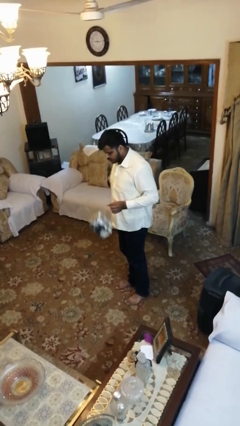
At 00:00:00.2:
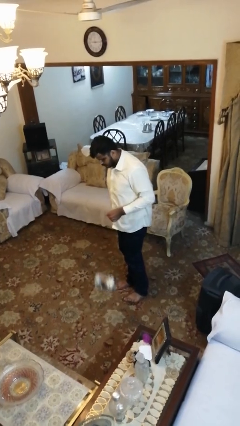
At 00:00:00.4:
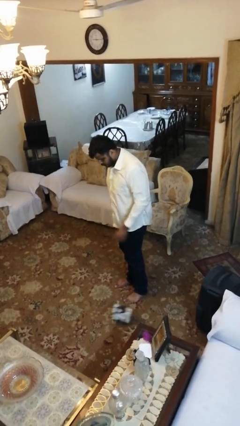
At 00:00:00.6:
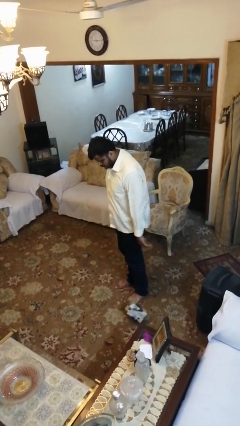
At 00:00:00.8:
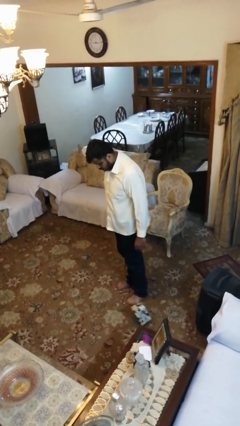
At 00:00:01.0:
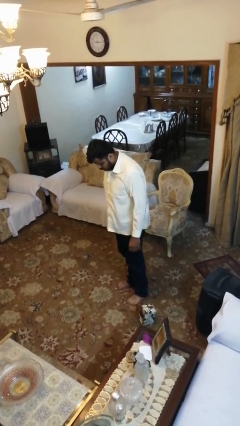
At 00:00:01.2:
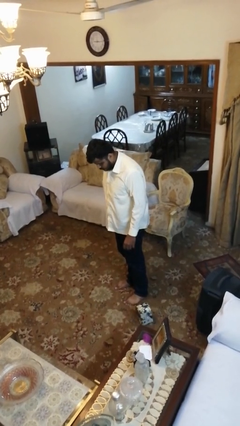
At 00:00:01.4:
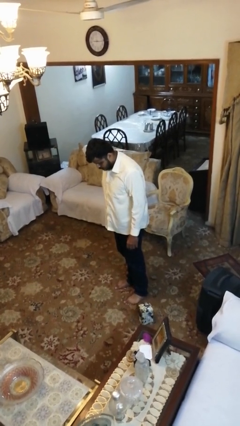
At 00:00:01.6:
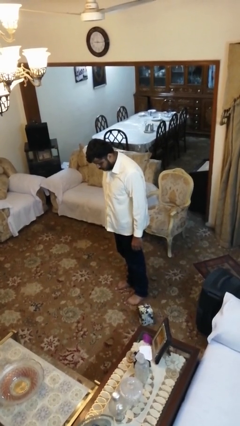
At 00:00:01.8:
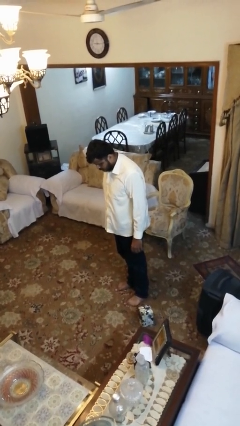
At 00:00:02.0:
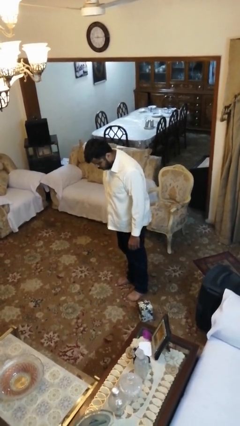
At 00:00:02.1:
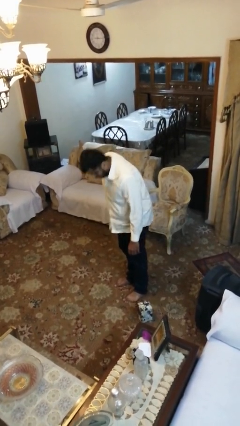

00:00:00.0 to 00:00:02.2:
person drops object

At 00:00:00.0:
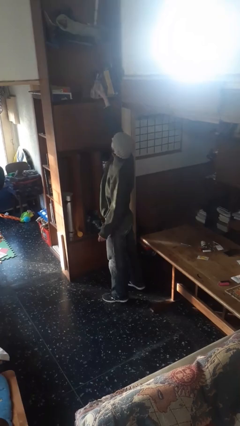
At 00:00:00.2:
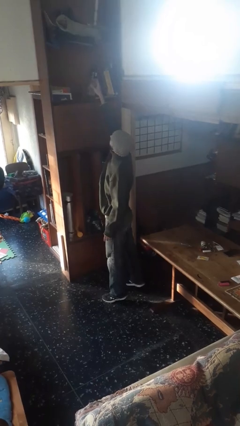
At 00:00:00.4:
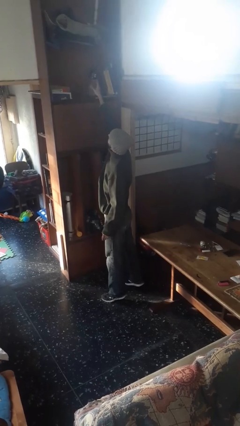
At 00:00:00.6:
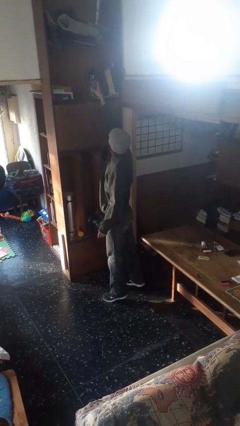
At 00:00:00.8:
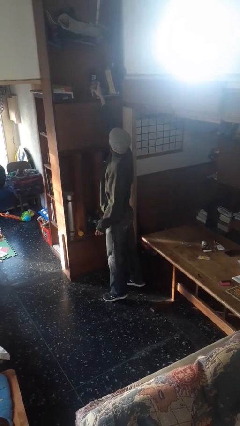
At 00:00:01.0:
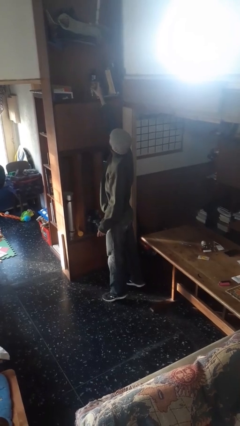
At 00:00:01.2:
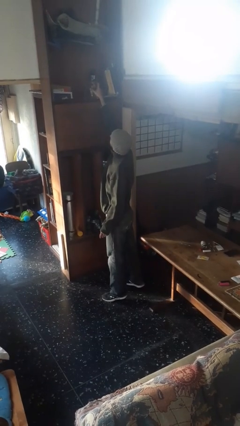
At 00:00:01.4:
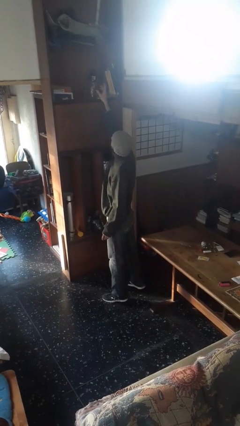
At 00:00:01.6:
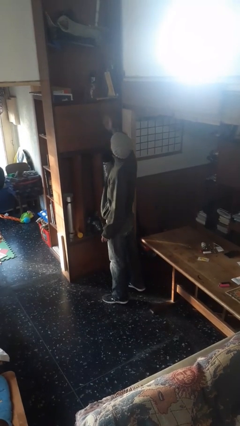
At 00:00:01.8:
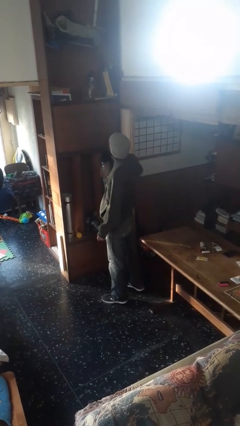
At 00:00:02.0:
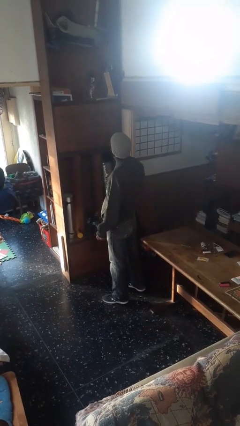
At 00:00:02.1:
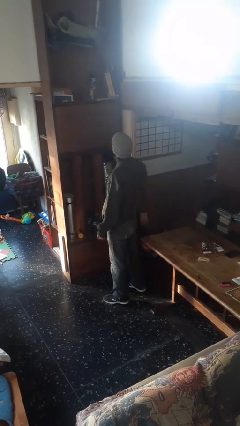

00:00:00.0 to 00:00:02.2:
person picks up object from shelf

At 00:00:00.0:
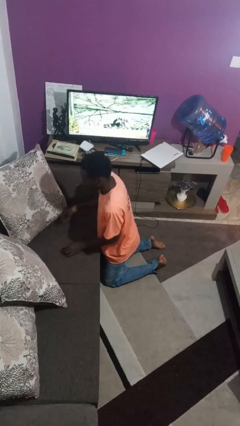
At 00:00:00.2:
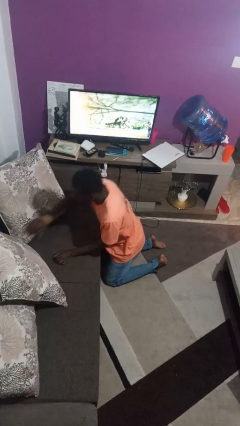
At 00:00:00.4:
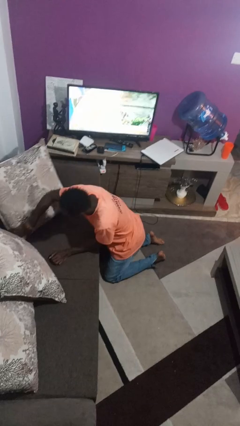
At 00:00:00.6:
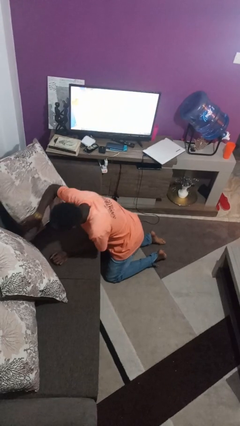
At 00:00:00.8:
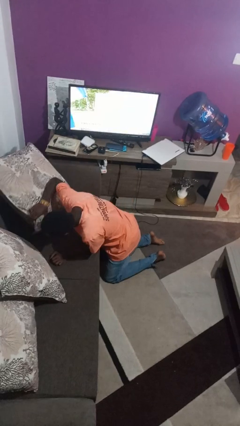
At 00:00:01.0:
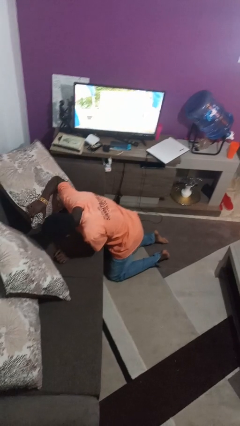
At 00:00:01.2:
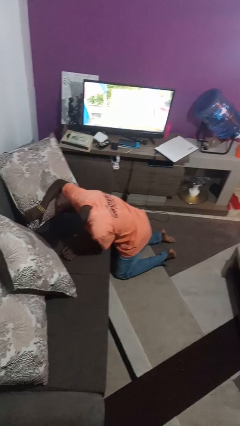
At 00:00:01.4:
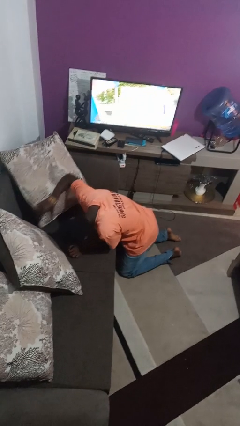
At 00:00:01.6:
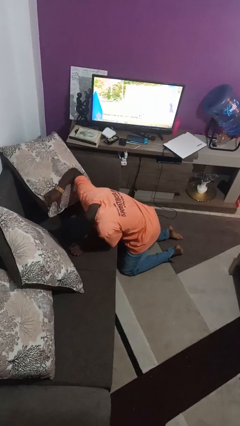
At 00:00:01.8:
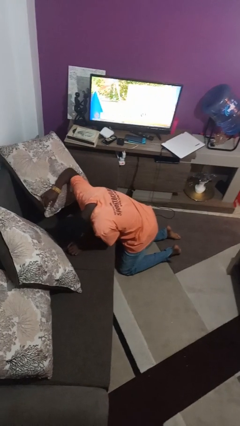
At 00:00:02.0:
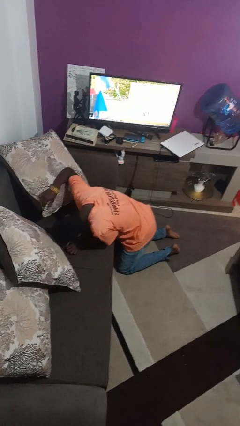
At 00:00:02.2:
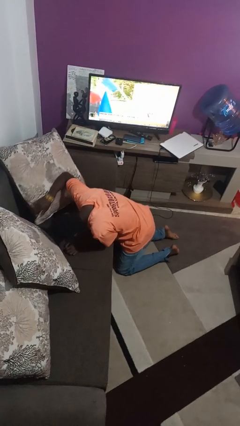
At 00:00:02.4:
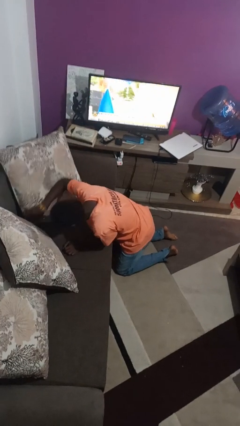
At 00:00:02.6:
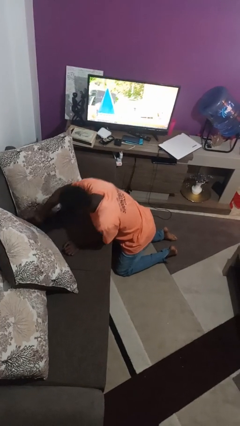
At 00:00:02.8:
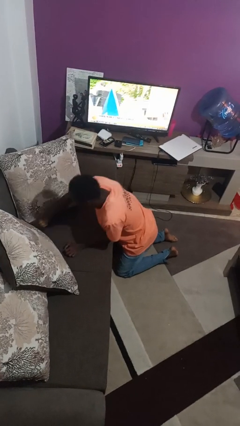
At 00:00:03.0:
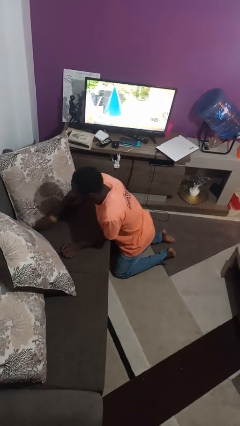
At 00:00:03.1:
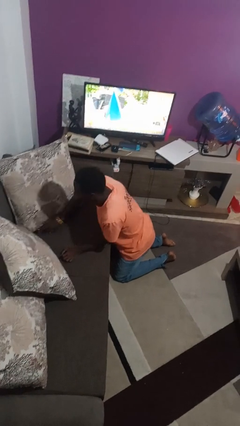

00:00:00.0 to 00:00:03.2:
person searches in couch

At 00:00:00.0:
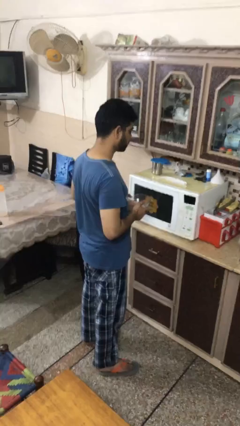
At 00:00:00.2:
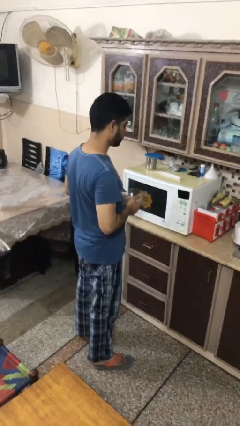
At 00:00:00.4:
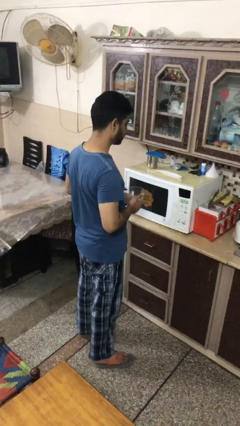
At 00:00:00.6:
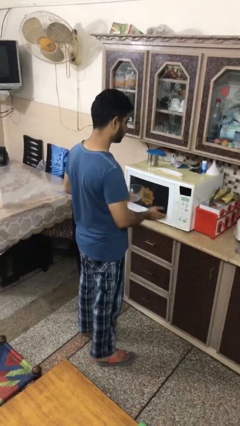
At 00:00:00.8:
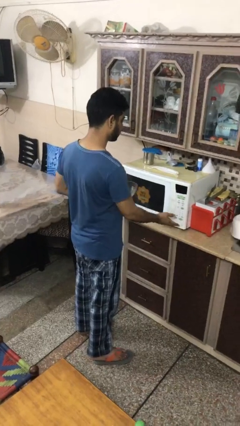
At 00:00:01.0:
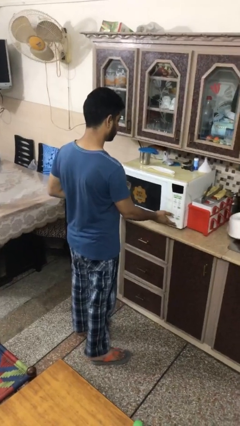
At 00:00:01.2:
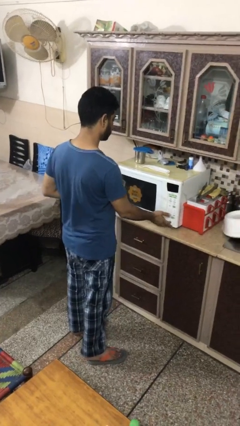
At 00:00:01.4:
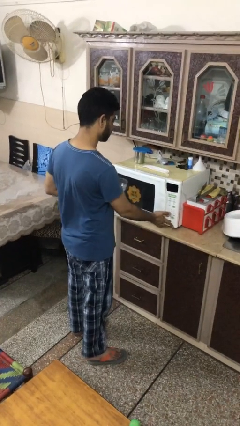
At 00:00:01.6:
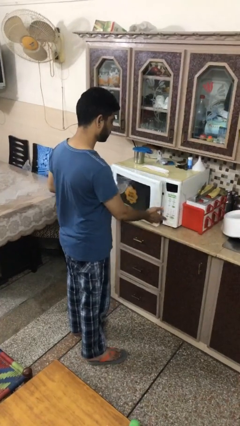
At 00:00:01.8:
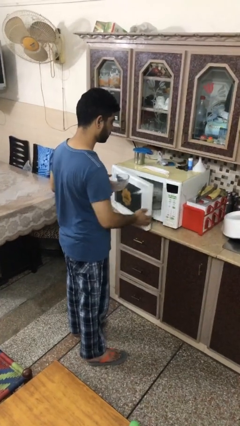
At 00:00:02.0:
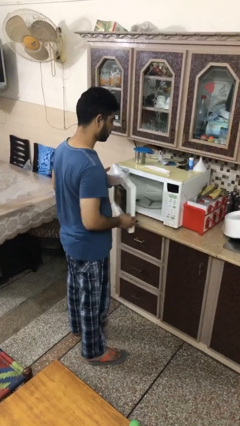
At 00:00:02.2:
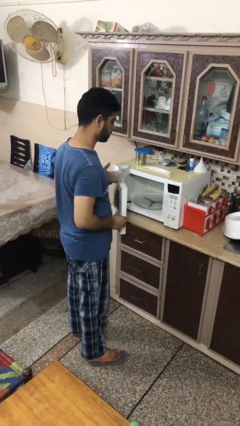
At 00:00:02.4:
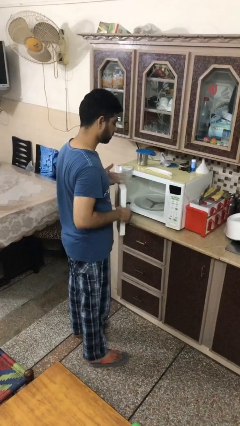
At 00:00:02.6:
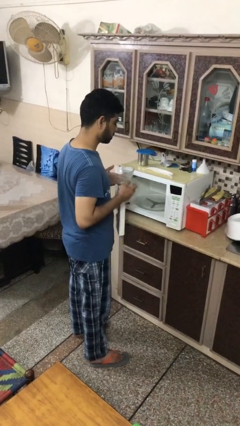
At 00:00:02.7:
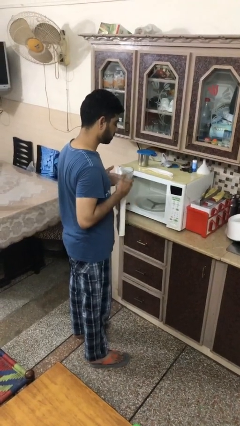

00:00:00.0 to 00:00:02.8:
person opens microwave

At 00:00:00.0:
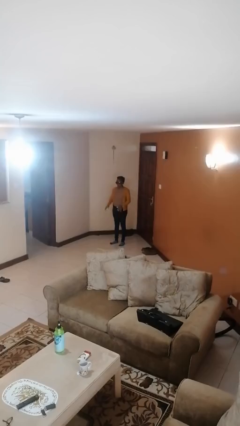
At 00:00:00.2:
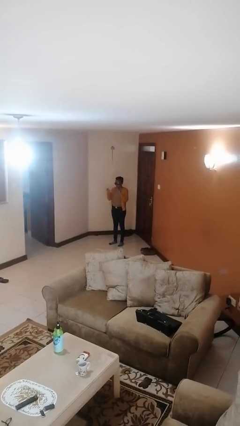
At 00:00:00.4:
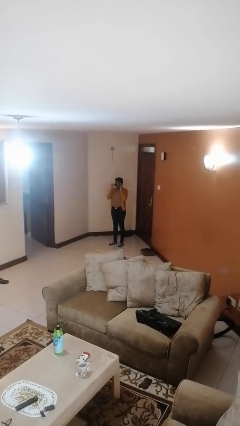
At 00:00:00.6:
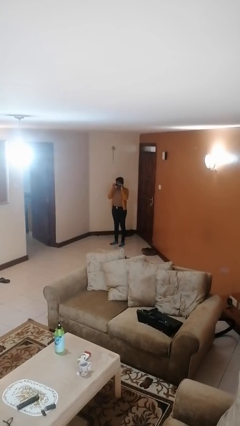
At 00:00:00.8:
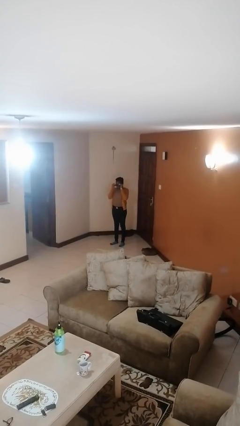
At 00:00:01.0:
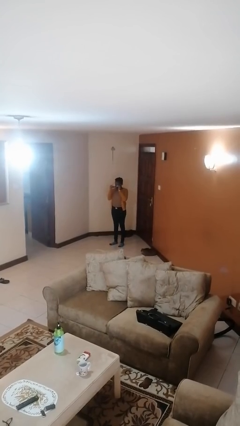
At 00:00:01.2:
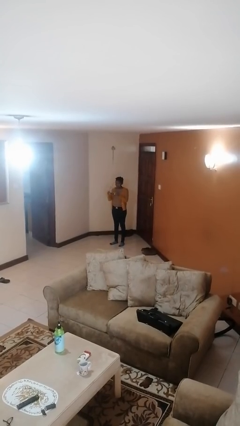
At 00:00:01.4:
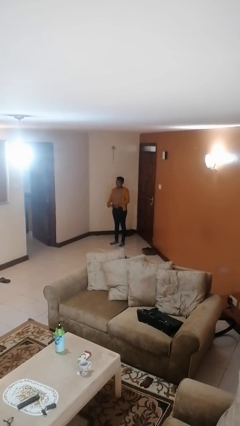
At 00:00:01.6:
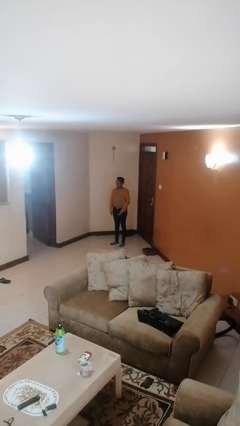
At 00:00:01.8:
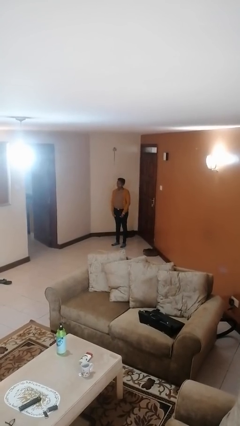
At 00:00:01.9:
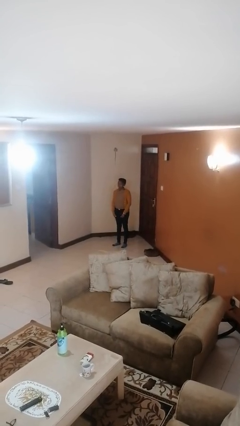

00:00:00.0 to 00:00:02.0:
person takes off sunglasses

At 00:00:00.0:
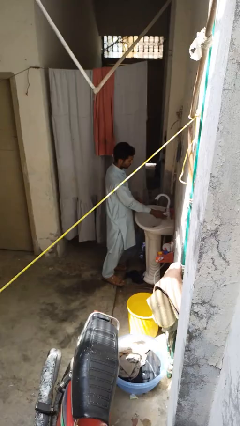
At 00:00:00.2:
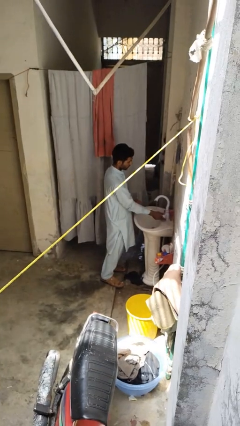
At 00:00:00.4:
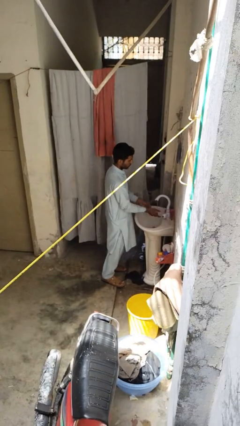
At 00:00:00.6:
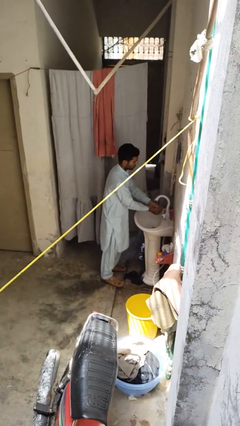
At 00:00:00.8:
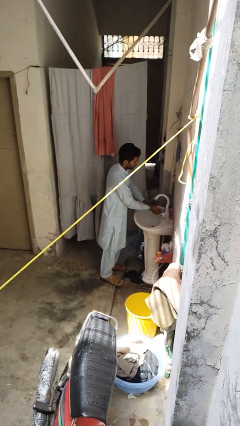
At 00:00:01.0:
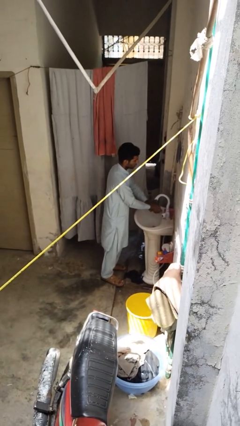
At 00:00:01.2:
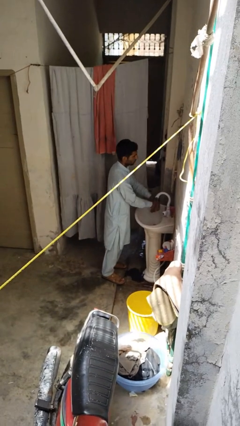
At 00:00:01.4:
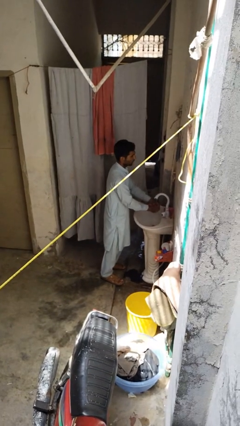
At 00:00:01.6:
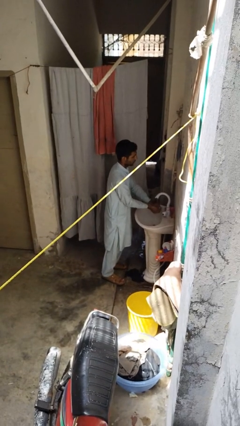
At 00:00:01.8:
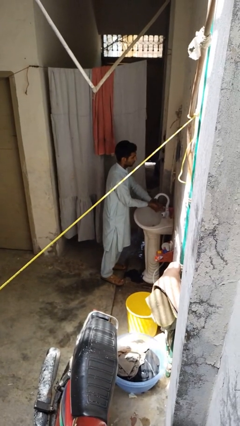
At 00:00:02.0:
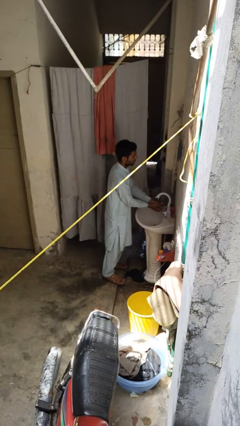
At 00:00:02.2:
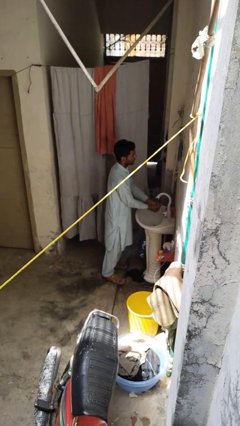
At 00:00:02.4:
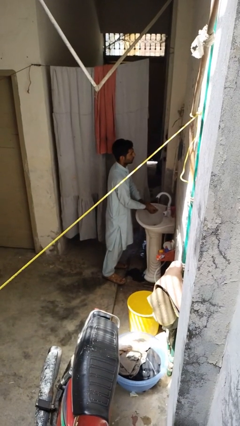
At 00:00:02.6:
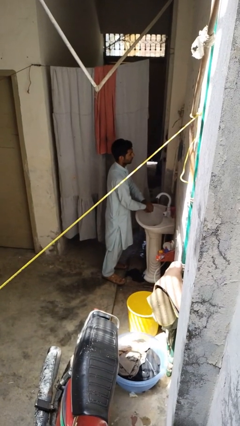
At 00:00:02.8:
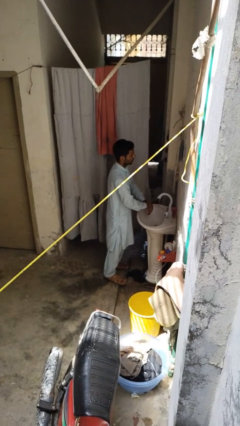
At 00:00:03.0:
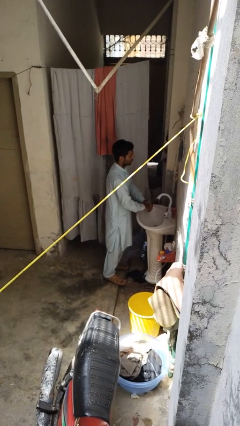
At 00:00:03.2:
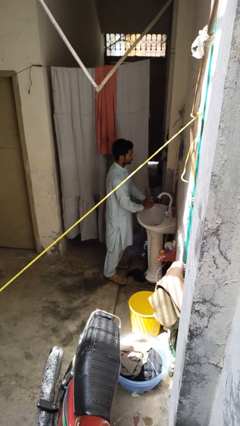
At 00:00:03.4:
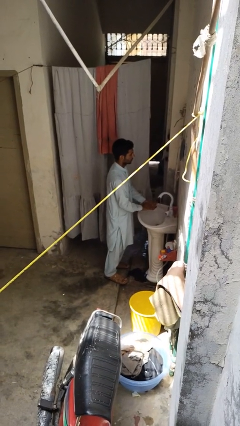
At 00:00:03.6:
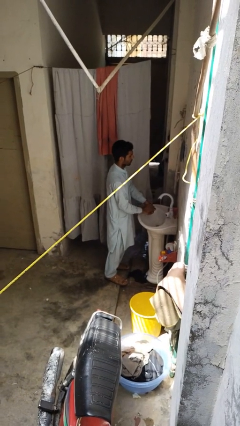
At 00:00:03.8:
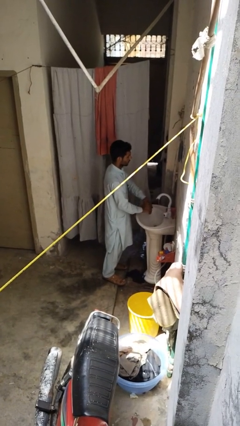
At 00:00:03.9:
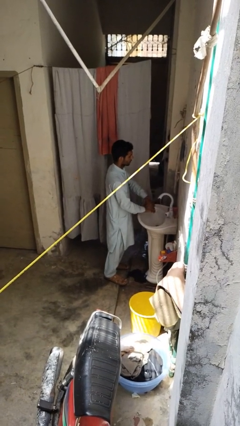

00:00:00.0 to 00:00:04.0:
person washes hands

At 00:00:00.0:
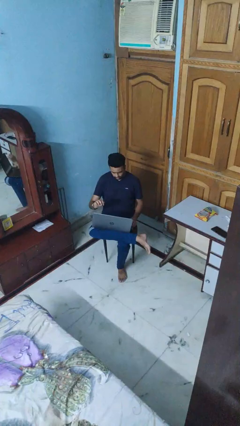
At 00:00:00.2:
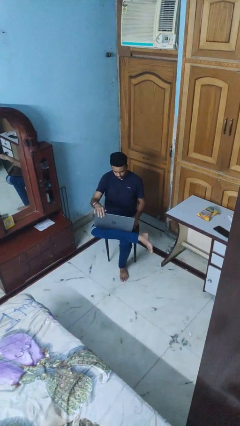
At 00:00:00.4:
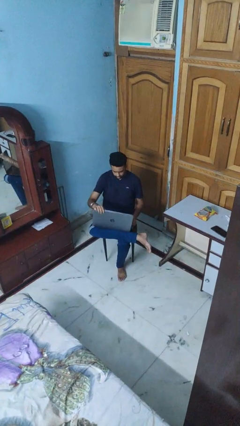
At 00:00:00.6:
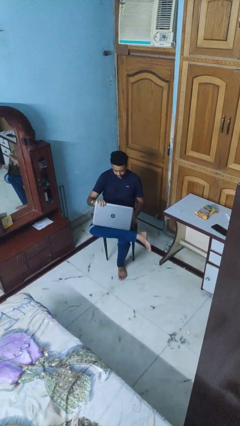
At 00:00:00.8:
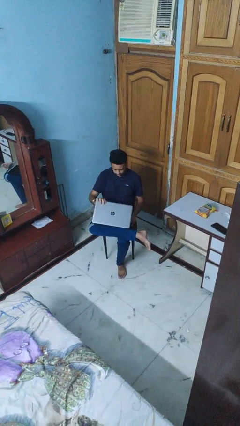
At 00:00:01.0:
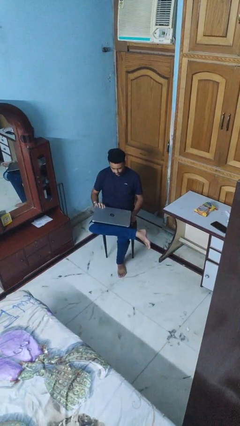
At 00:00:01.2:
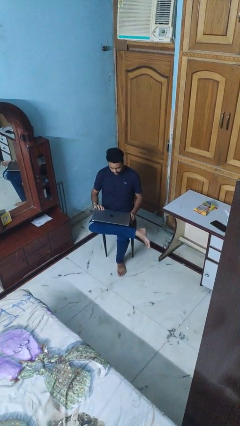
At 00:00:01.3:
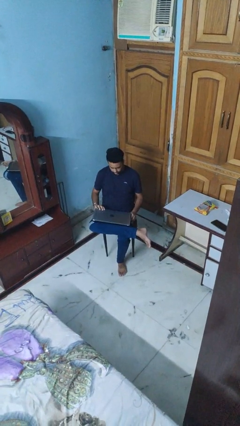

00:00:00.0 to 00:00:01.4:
person closes laptop
